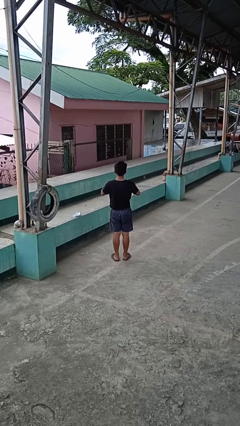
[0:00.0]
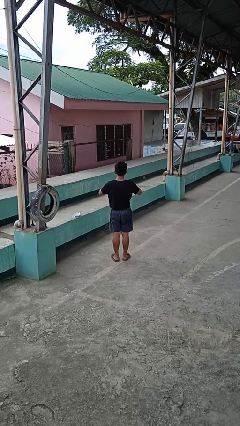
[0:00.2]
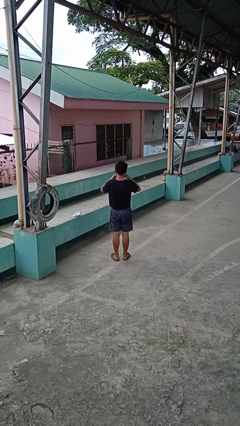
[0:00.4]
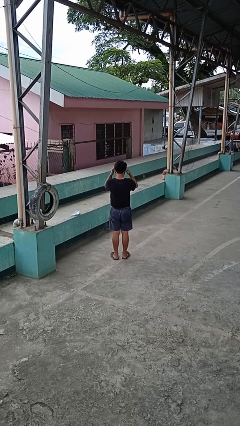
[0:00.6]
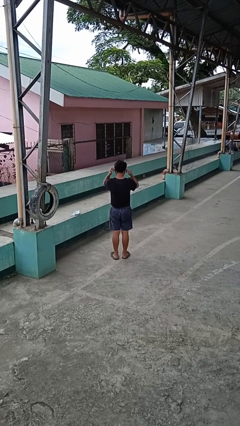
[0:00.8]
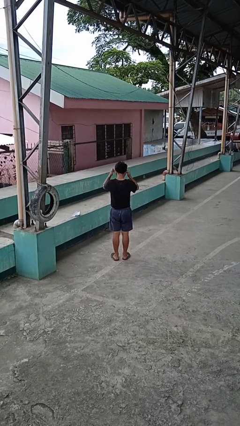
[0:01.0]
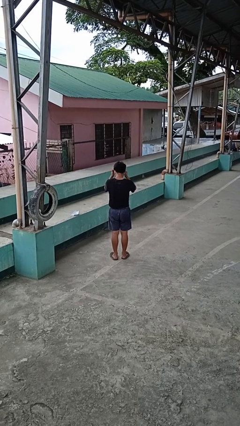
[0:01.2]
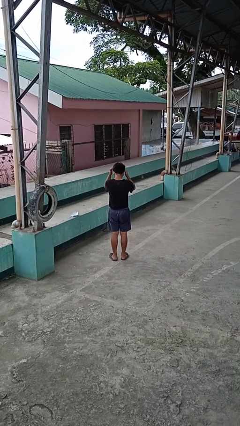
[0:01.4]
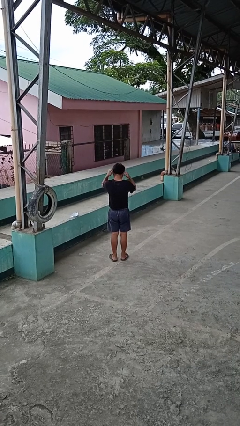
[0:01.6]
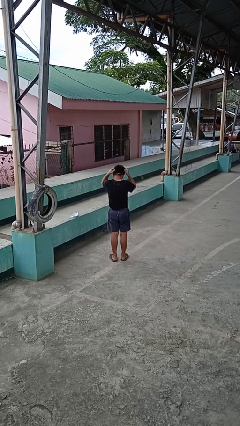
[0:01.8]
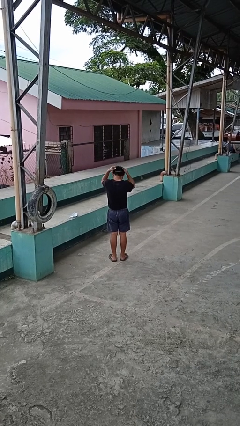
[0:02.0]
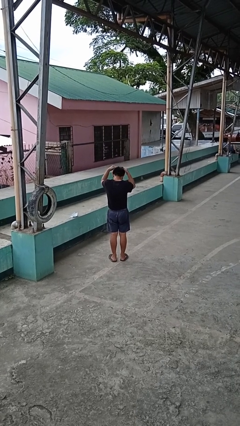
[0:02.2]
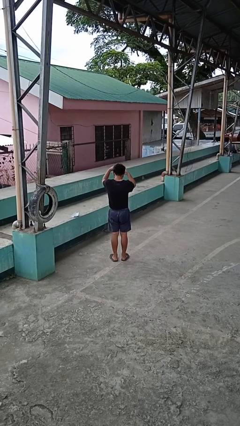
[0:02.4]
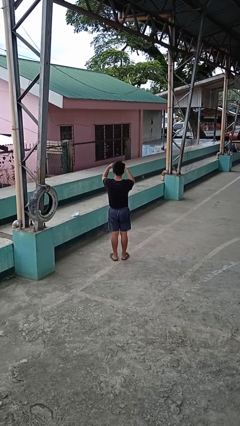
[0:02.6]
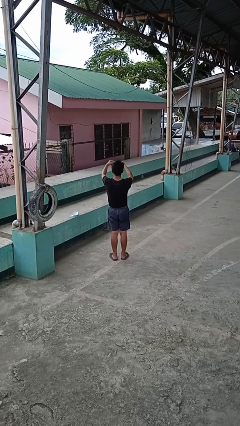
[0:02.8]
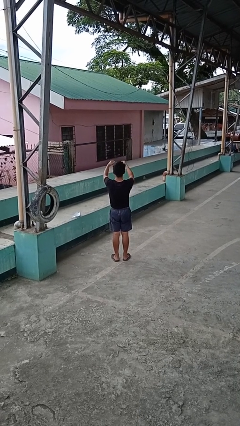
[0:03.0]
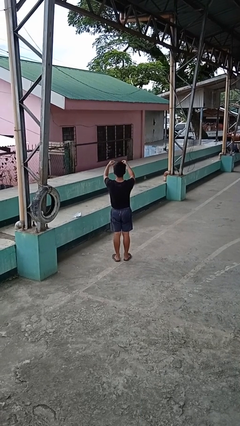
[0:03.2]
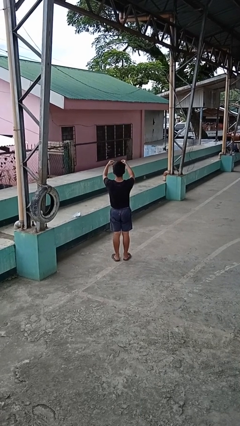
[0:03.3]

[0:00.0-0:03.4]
person takes off necklace

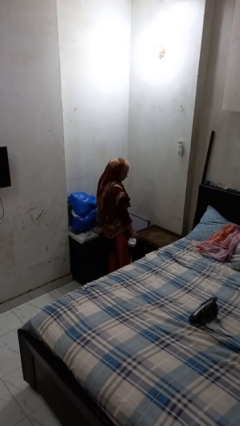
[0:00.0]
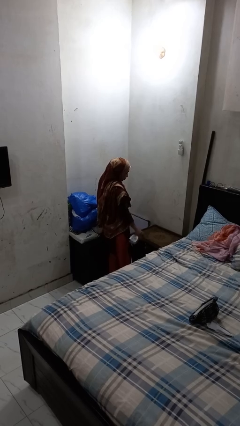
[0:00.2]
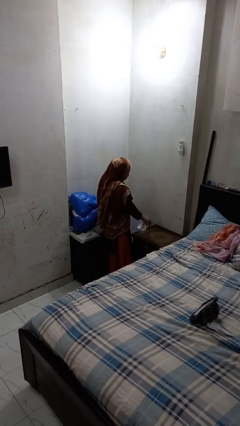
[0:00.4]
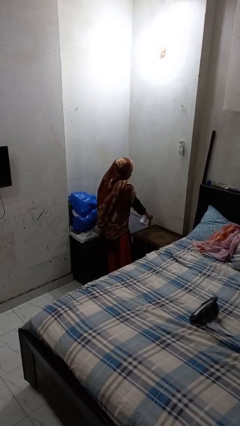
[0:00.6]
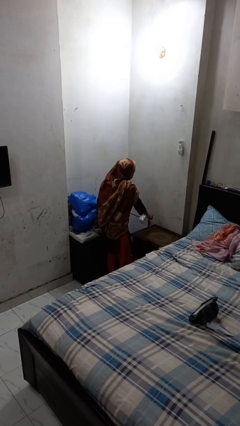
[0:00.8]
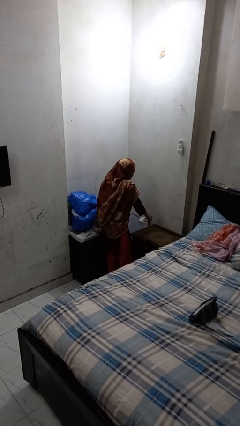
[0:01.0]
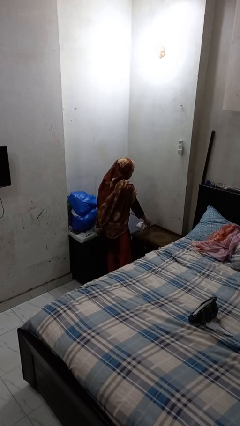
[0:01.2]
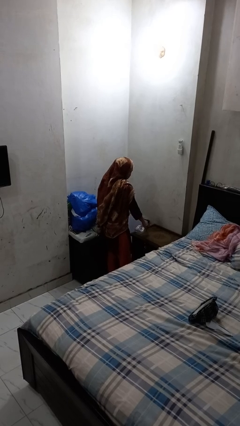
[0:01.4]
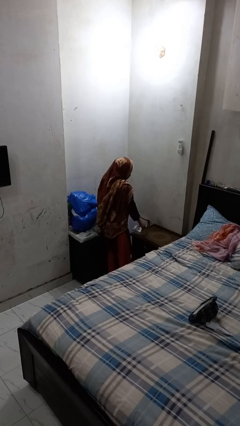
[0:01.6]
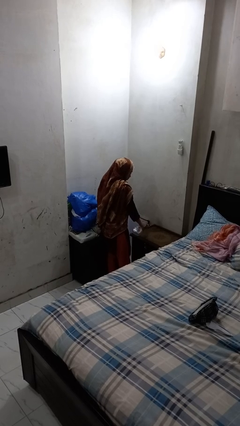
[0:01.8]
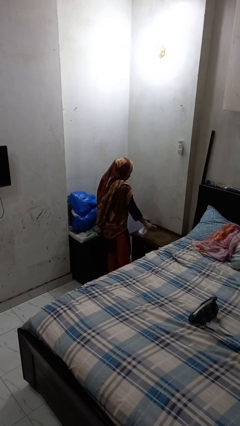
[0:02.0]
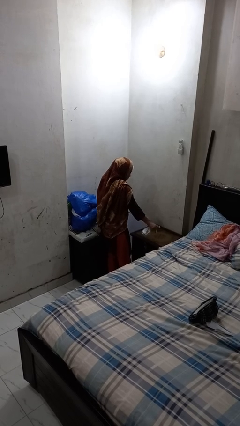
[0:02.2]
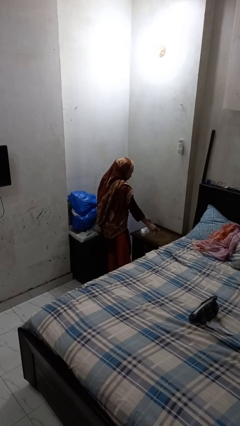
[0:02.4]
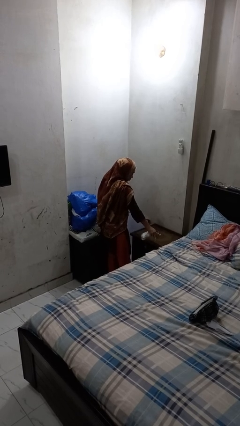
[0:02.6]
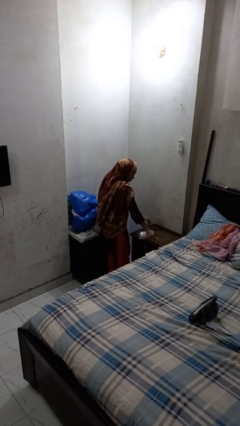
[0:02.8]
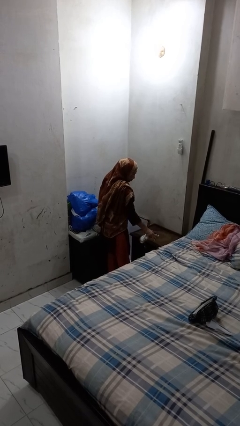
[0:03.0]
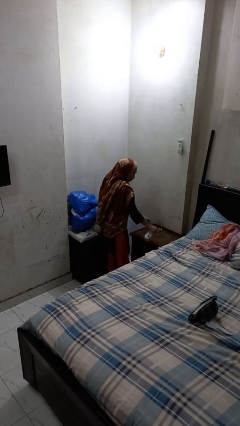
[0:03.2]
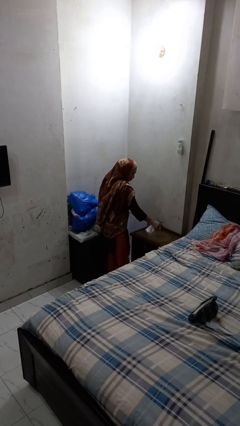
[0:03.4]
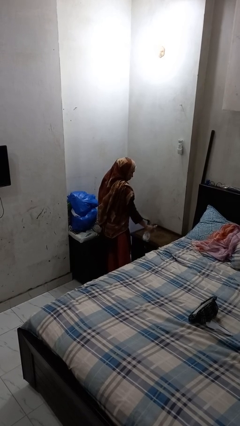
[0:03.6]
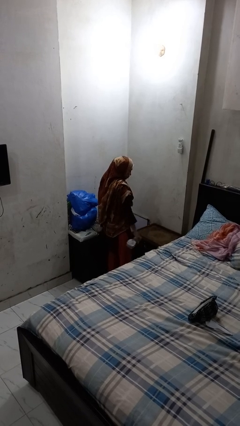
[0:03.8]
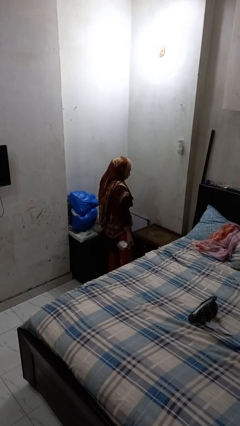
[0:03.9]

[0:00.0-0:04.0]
person sprays from bottle

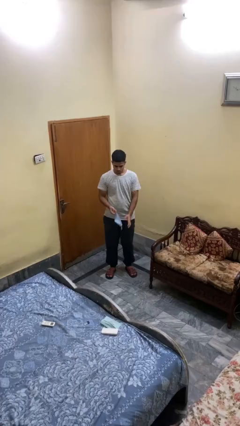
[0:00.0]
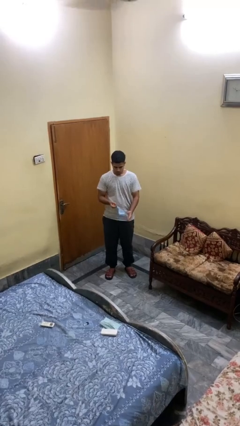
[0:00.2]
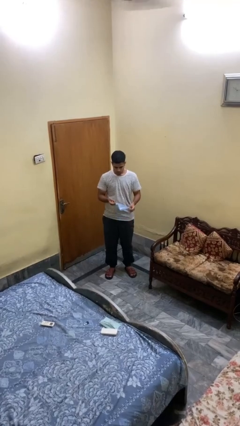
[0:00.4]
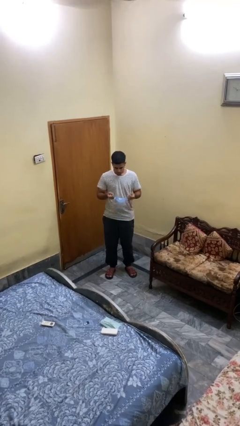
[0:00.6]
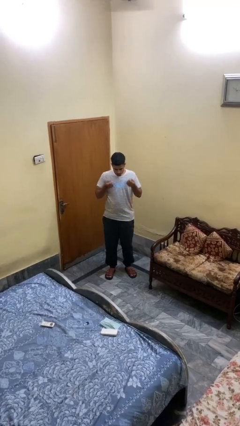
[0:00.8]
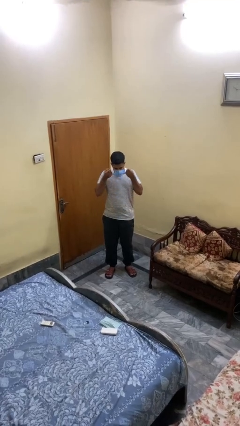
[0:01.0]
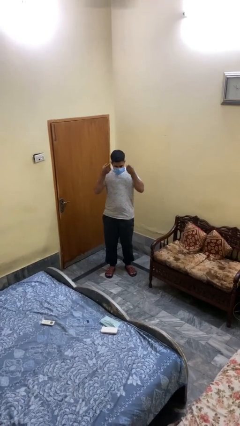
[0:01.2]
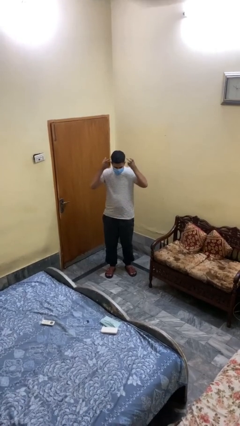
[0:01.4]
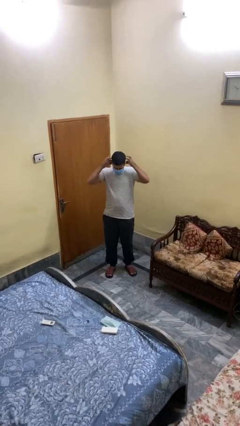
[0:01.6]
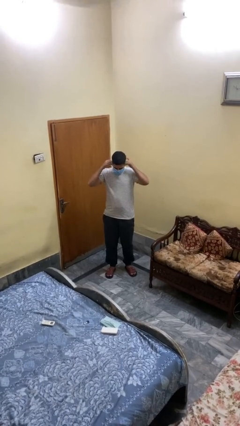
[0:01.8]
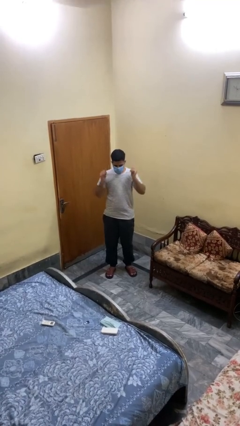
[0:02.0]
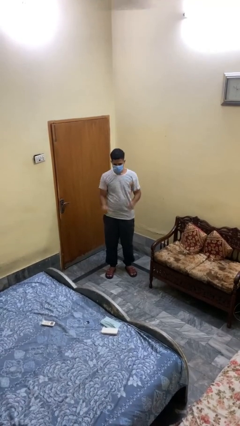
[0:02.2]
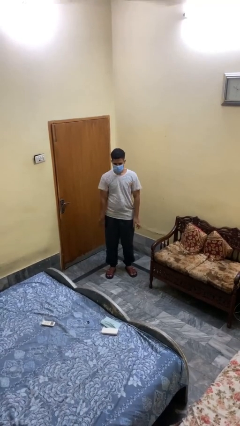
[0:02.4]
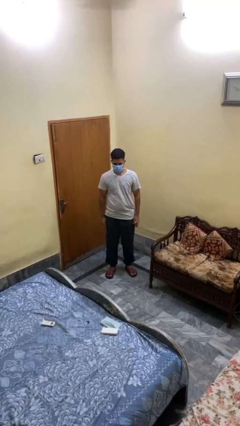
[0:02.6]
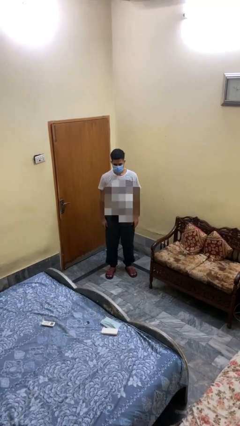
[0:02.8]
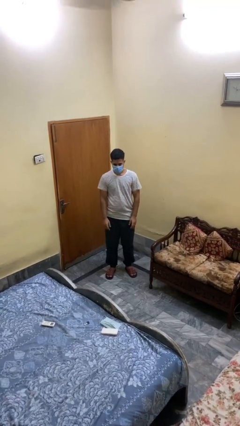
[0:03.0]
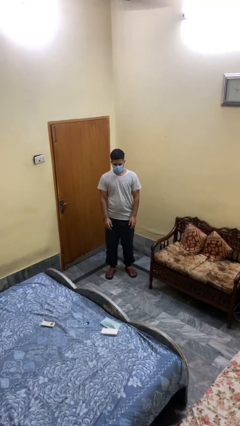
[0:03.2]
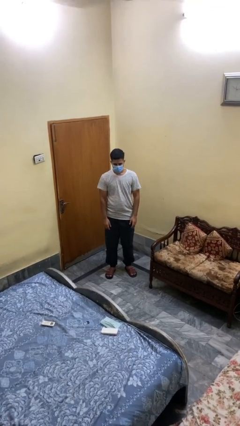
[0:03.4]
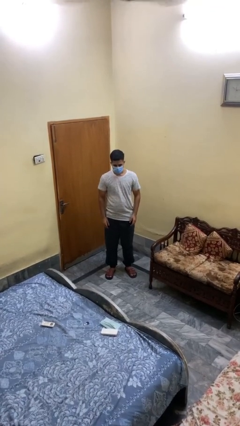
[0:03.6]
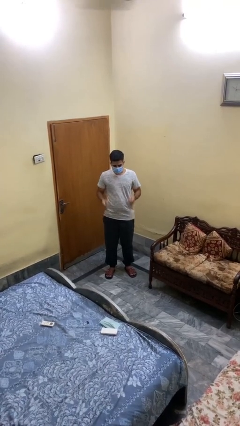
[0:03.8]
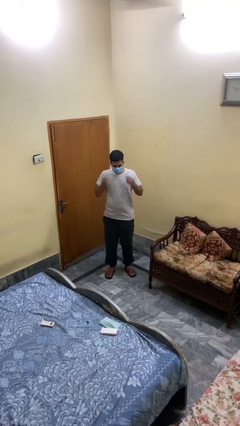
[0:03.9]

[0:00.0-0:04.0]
person puts on facemask

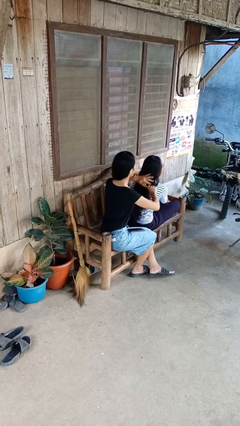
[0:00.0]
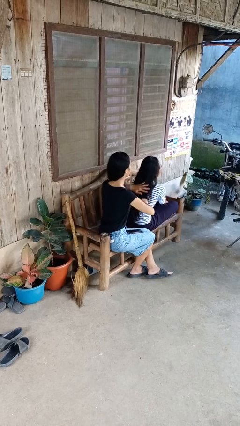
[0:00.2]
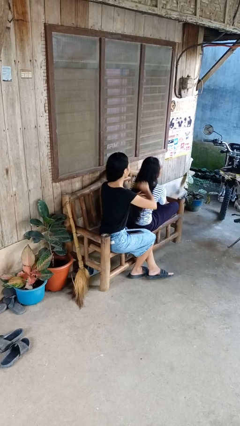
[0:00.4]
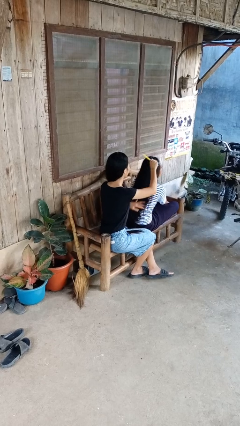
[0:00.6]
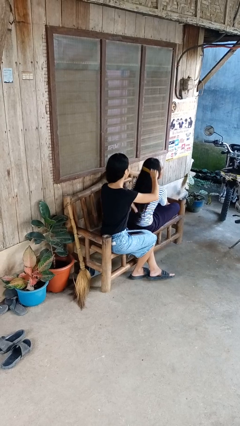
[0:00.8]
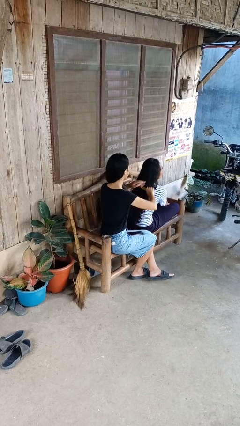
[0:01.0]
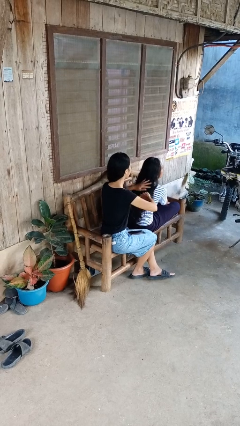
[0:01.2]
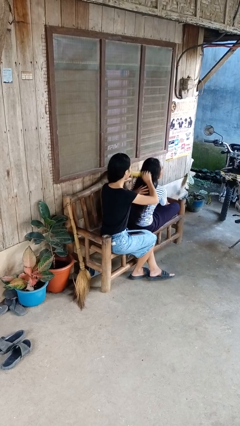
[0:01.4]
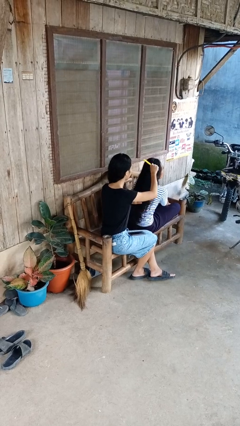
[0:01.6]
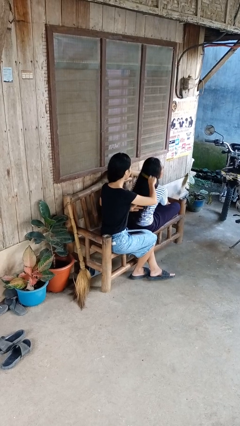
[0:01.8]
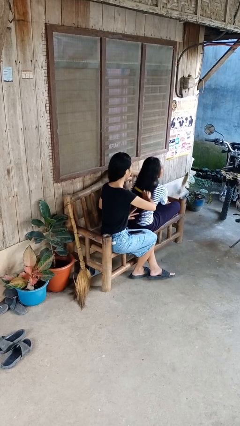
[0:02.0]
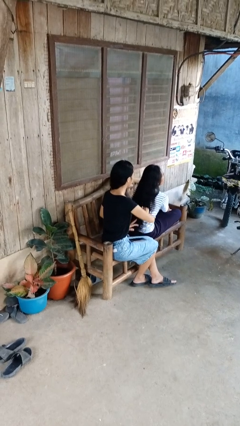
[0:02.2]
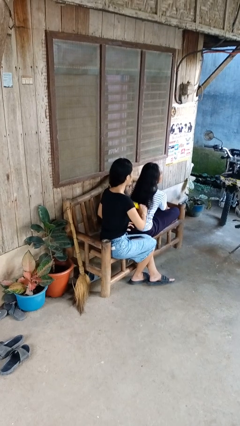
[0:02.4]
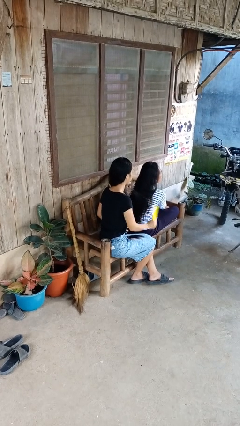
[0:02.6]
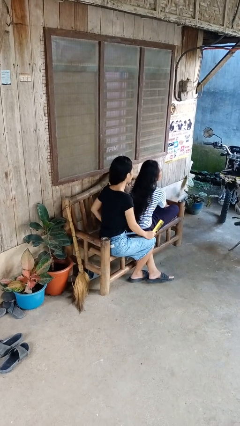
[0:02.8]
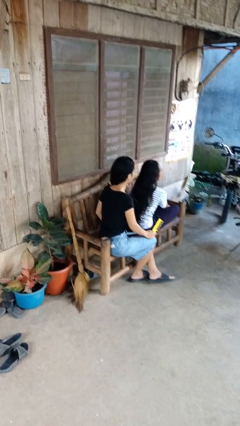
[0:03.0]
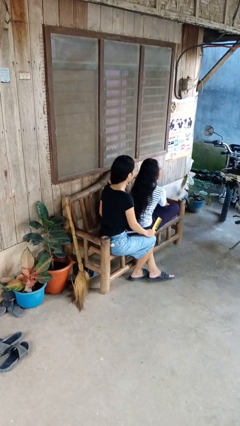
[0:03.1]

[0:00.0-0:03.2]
person brushes hair of person

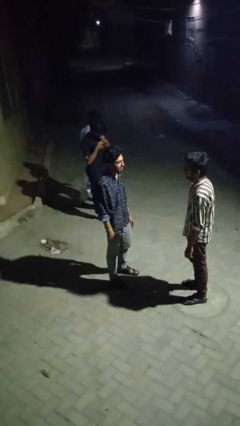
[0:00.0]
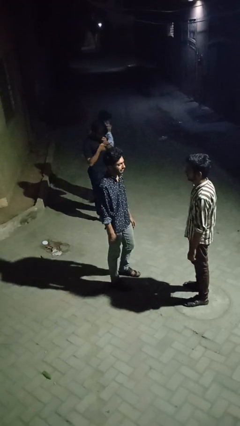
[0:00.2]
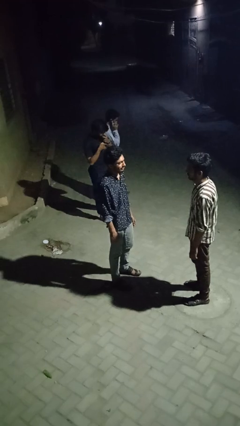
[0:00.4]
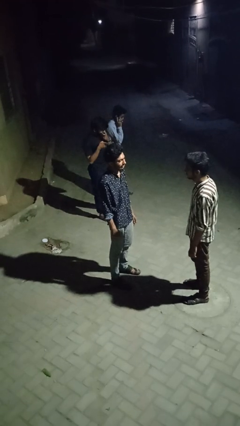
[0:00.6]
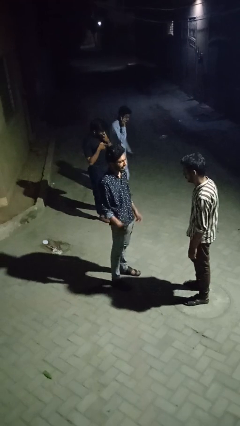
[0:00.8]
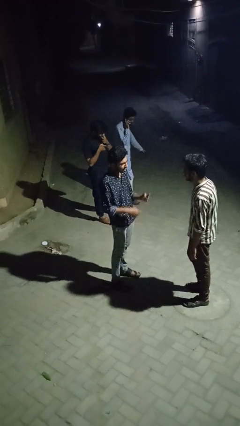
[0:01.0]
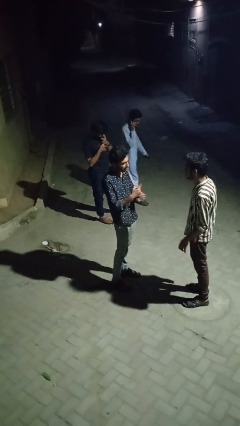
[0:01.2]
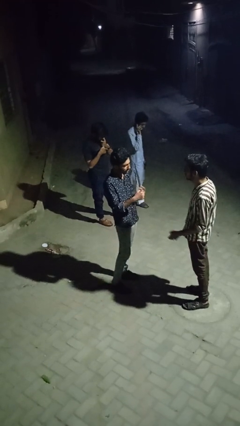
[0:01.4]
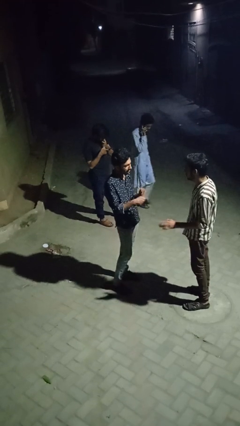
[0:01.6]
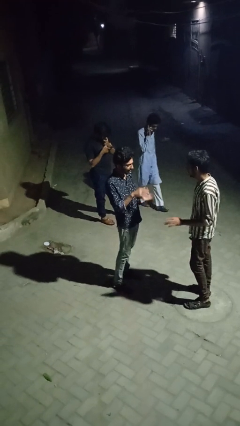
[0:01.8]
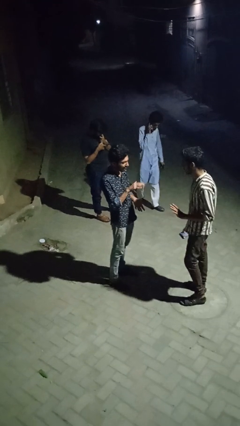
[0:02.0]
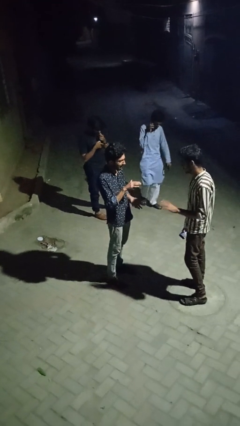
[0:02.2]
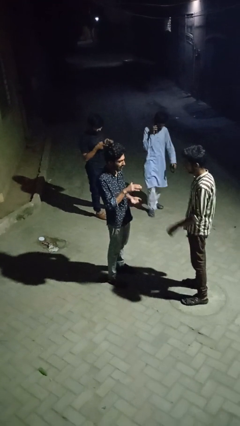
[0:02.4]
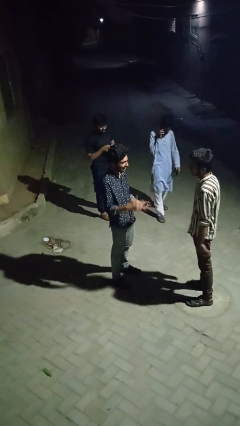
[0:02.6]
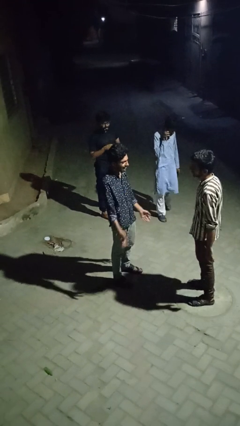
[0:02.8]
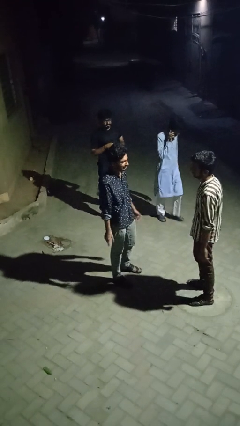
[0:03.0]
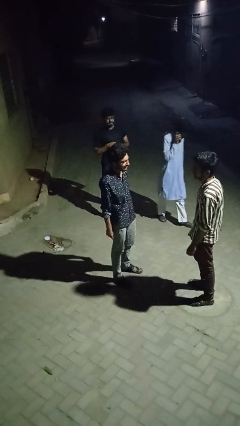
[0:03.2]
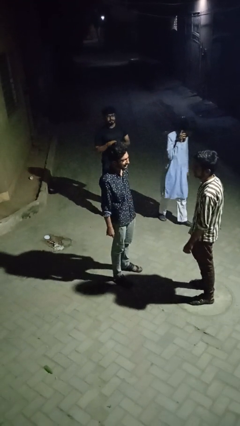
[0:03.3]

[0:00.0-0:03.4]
person talks to person
